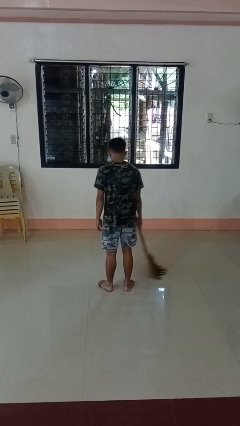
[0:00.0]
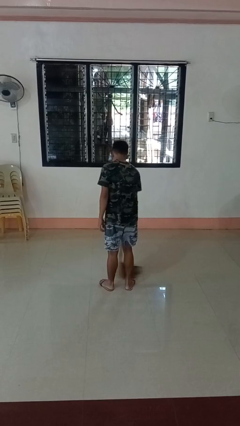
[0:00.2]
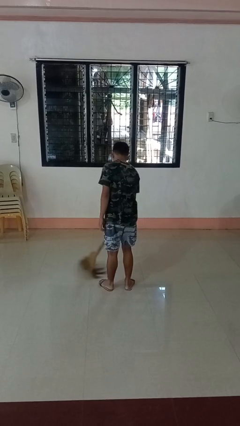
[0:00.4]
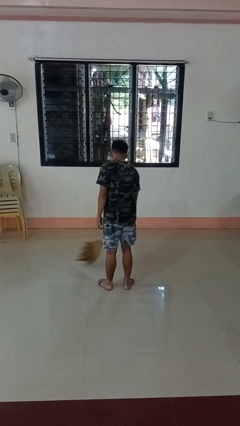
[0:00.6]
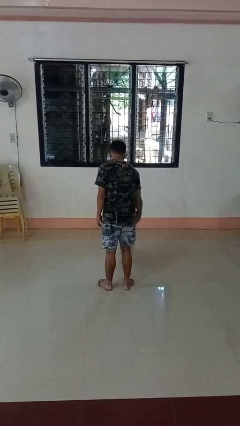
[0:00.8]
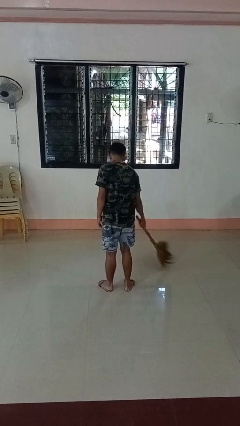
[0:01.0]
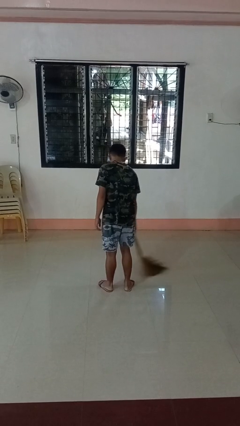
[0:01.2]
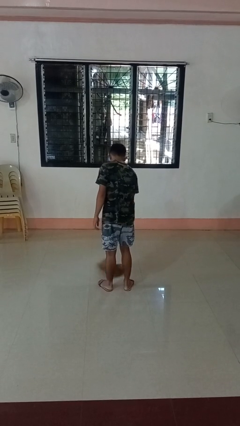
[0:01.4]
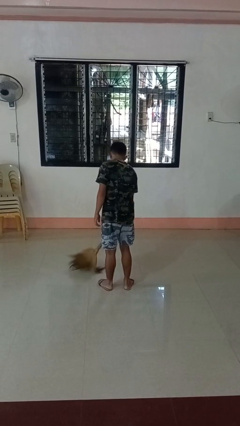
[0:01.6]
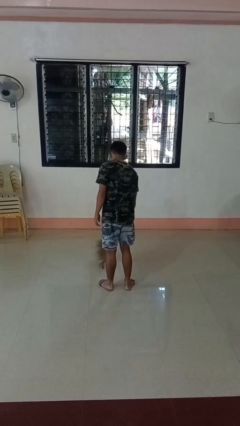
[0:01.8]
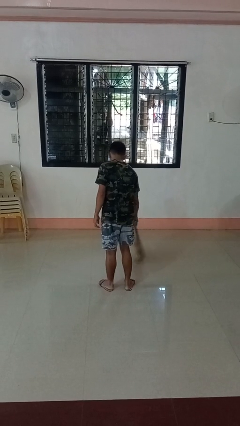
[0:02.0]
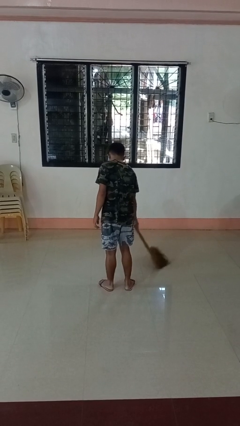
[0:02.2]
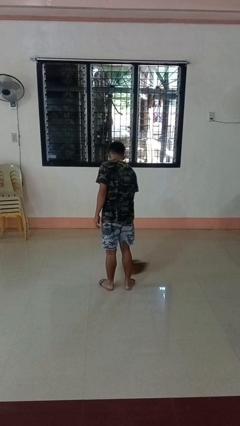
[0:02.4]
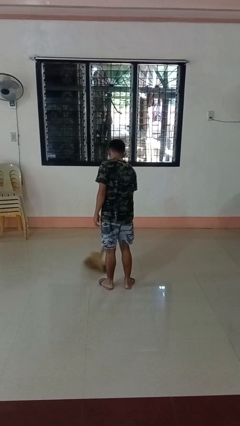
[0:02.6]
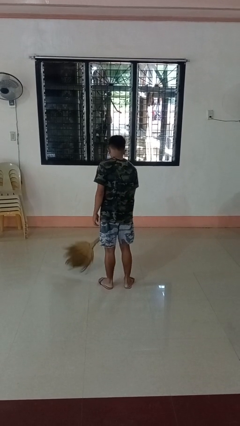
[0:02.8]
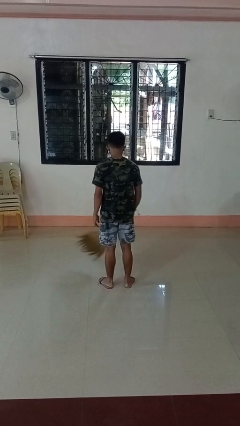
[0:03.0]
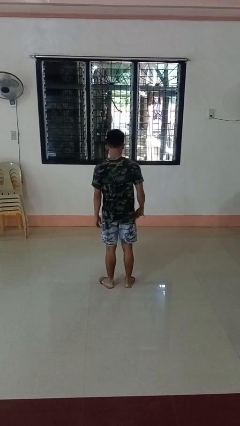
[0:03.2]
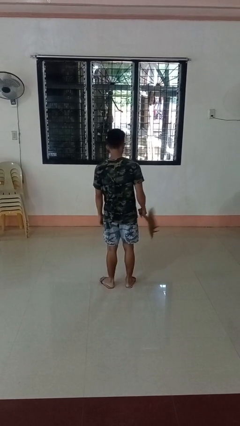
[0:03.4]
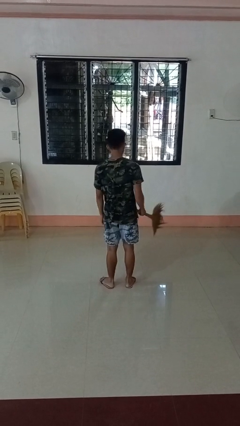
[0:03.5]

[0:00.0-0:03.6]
person sweeps floor

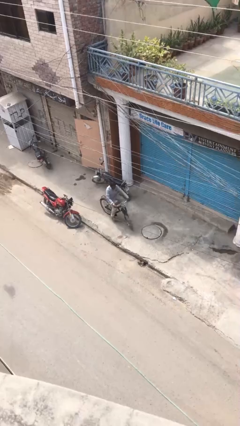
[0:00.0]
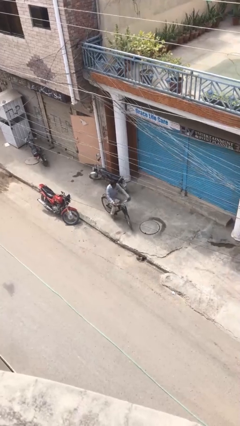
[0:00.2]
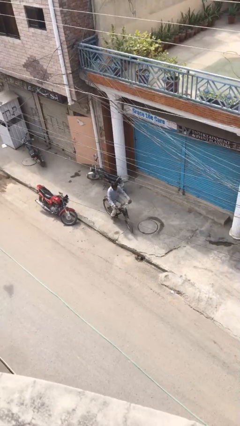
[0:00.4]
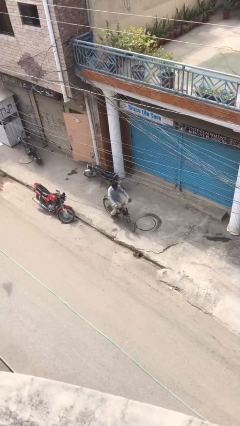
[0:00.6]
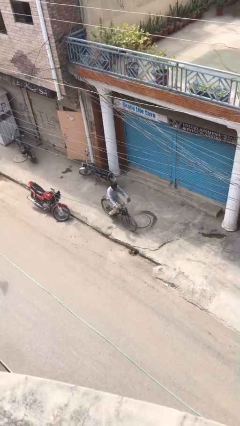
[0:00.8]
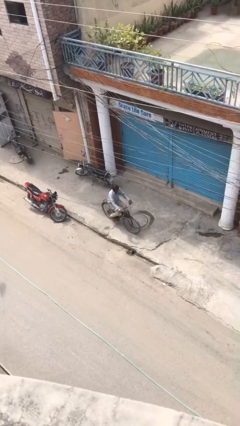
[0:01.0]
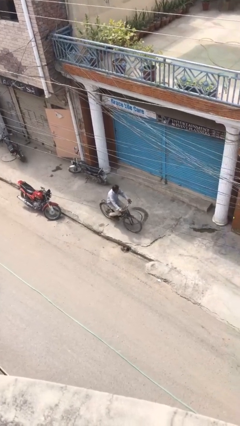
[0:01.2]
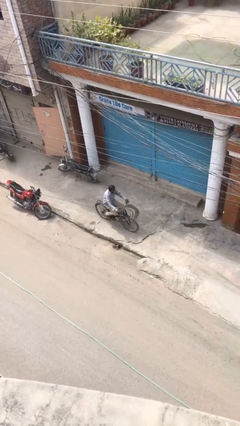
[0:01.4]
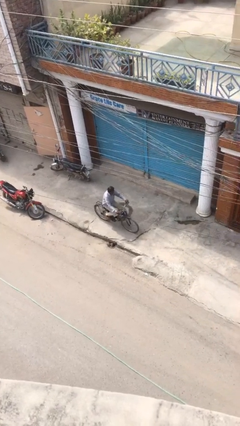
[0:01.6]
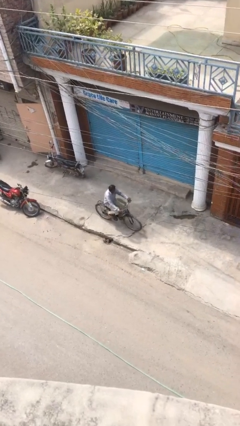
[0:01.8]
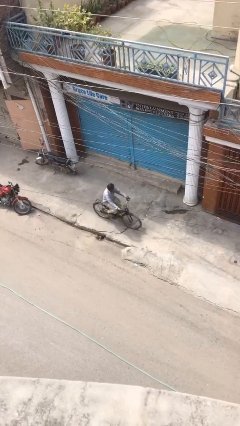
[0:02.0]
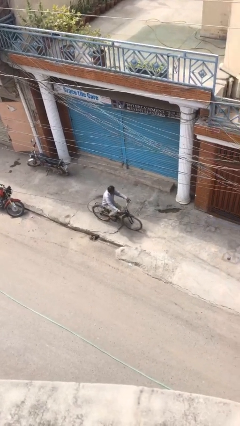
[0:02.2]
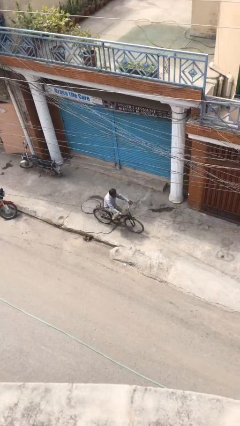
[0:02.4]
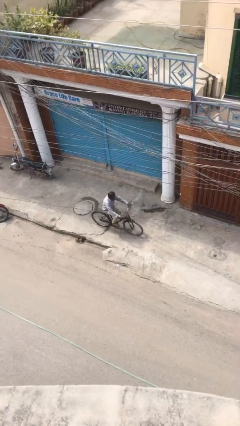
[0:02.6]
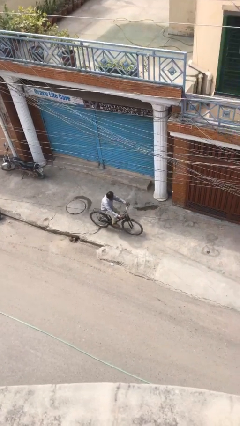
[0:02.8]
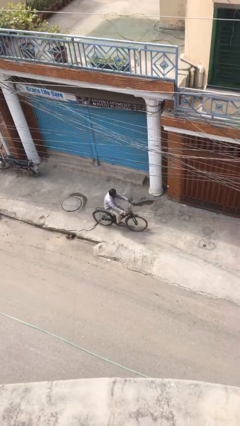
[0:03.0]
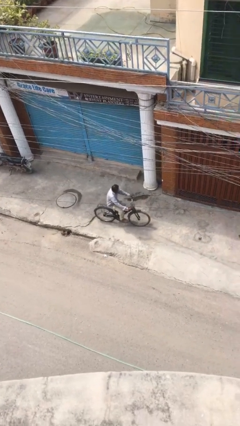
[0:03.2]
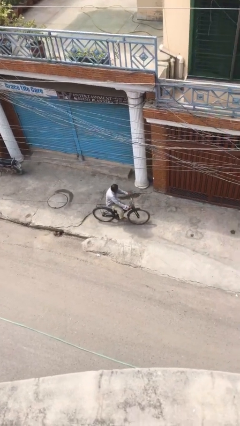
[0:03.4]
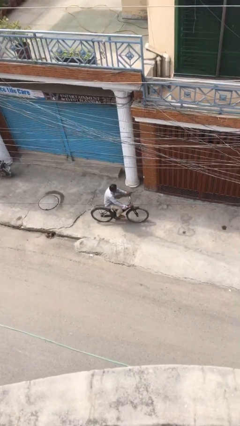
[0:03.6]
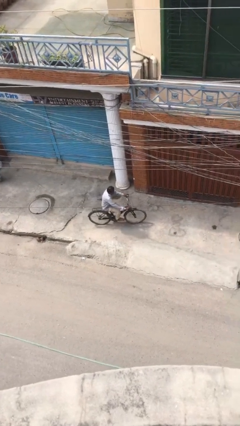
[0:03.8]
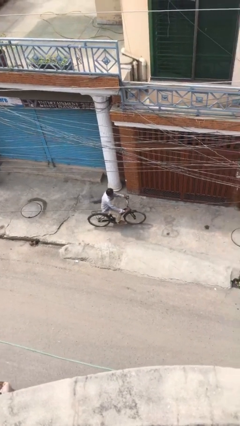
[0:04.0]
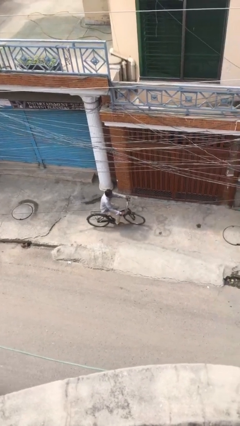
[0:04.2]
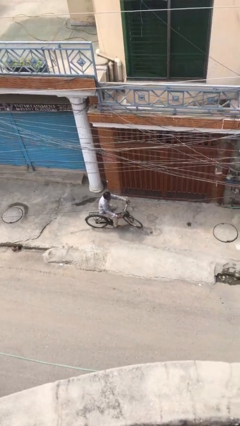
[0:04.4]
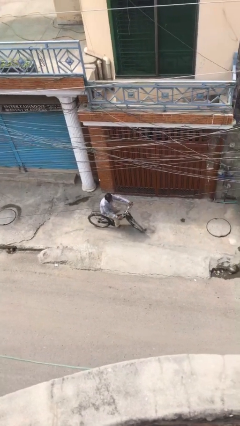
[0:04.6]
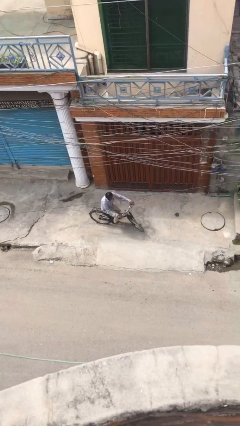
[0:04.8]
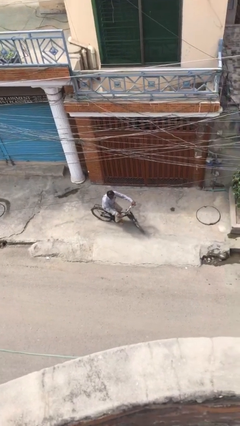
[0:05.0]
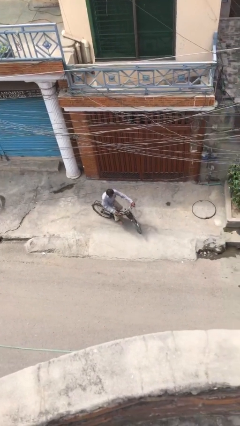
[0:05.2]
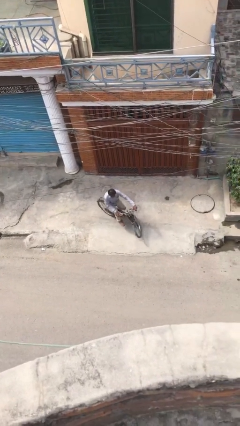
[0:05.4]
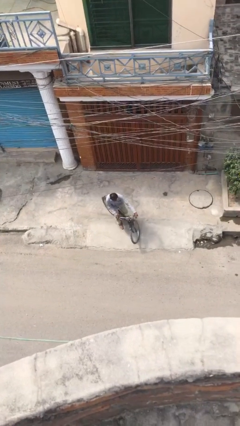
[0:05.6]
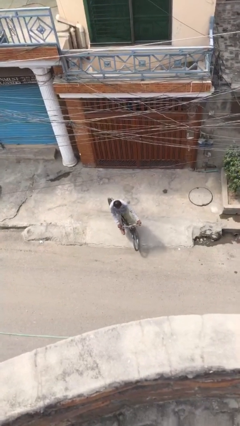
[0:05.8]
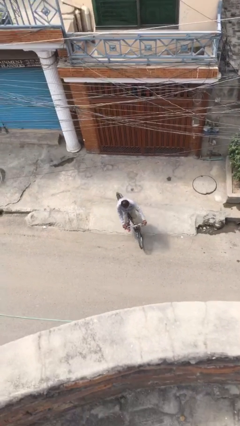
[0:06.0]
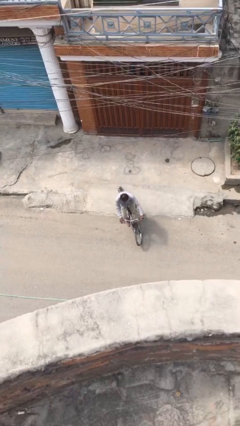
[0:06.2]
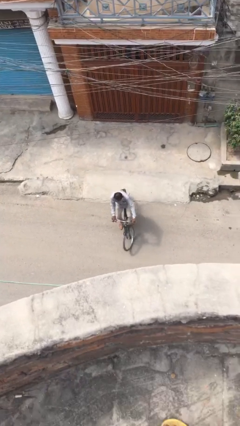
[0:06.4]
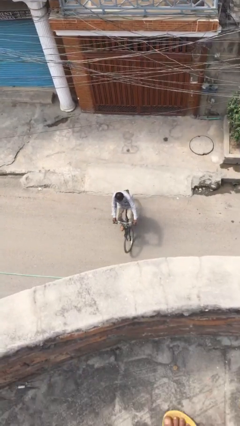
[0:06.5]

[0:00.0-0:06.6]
person rides bicycle

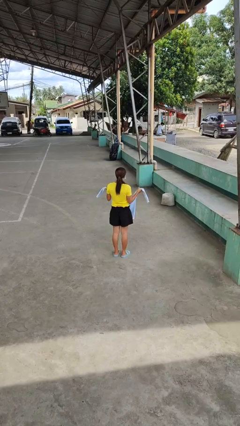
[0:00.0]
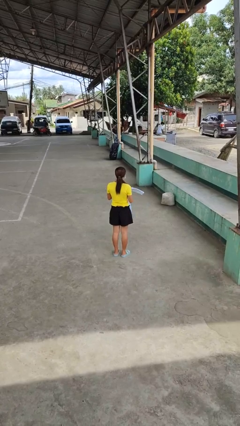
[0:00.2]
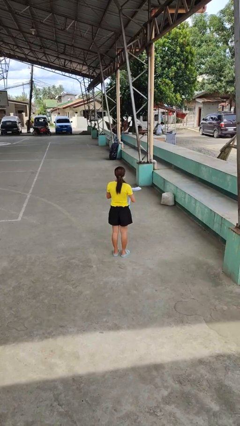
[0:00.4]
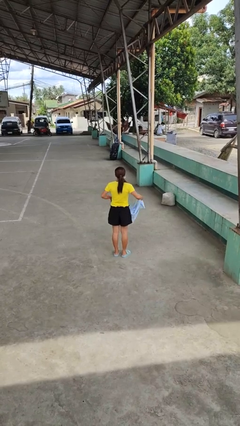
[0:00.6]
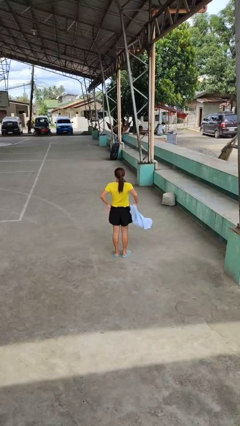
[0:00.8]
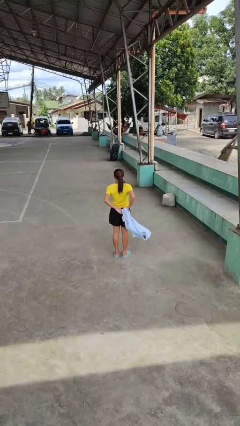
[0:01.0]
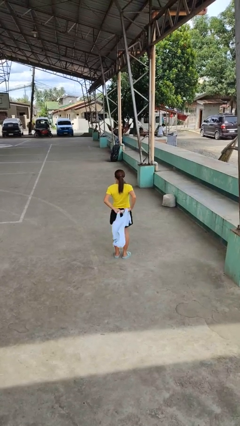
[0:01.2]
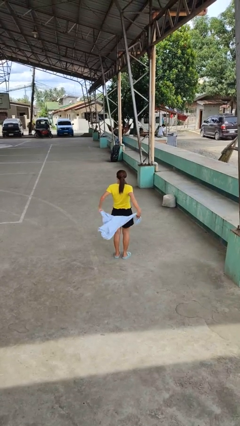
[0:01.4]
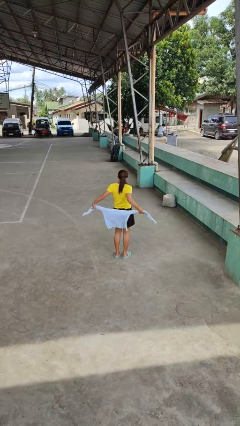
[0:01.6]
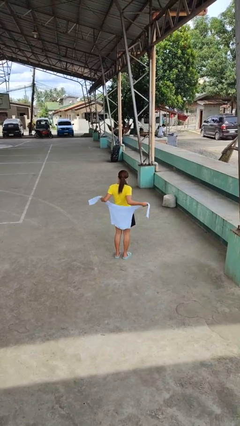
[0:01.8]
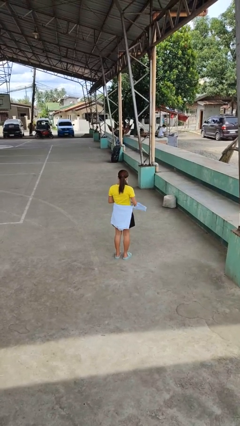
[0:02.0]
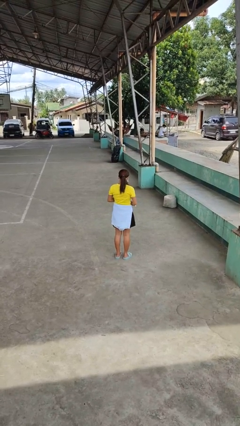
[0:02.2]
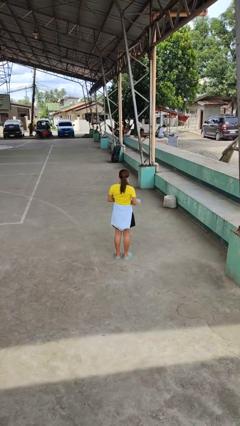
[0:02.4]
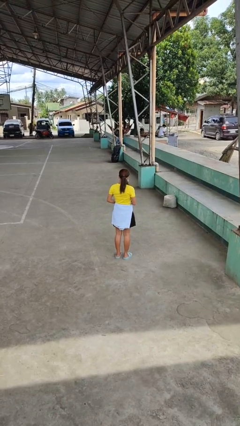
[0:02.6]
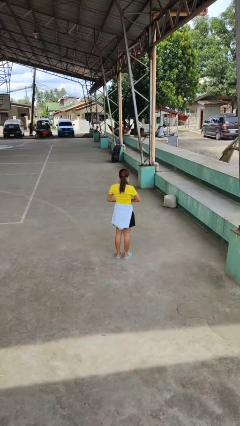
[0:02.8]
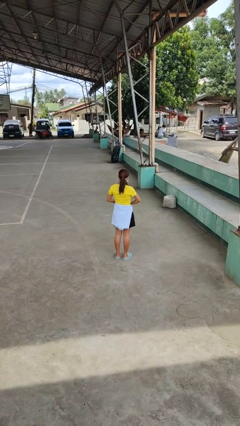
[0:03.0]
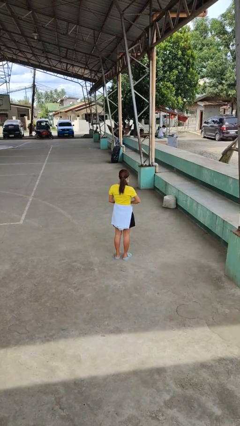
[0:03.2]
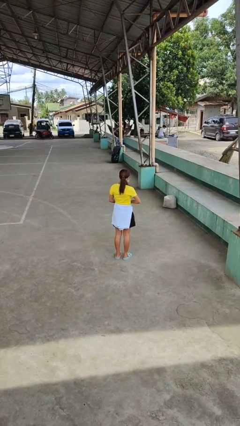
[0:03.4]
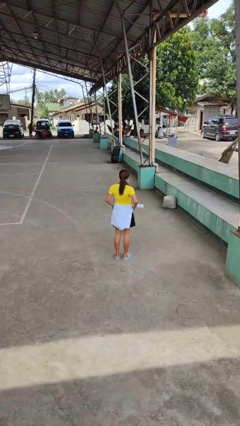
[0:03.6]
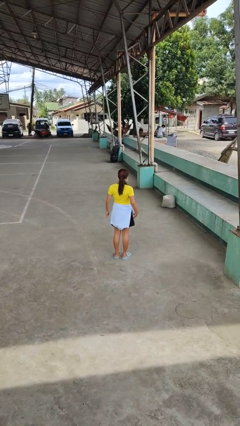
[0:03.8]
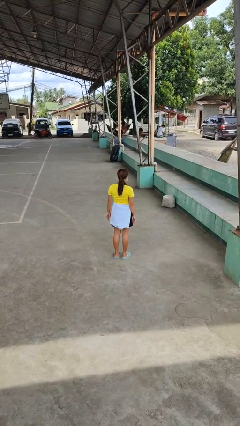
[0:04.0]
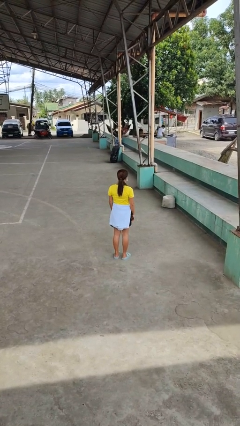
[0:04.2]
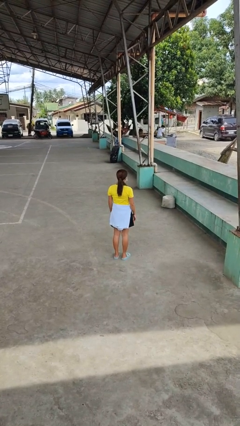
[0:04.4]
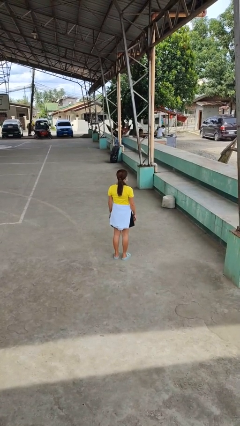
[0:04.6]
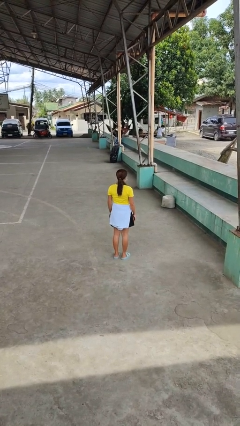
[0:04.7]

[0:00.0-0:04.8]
person ties jacket around waist

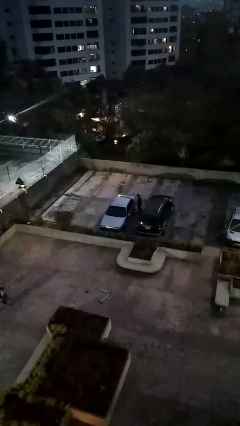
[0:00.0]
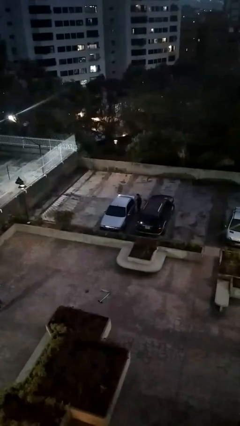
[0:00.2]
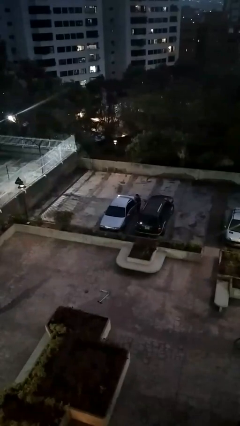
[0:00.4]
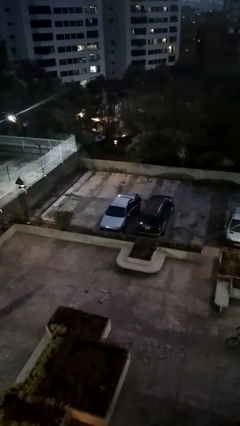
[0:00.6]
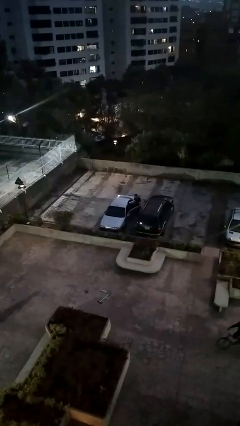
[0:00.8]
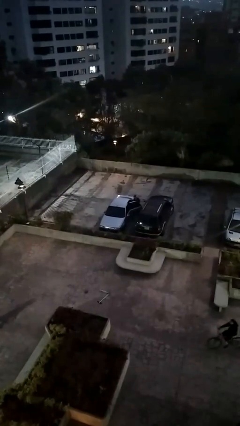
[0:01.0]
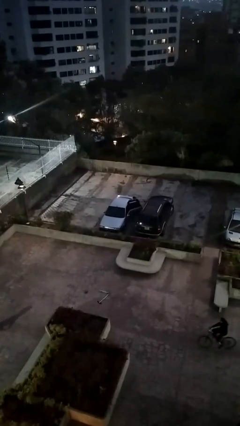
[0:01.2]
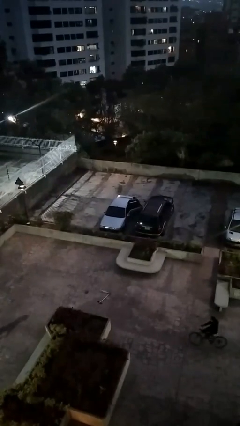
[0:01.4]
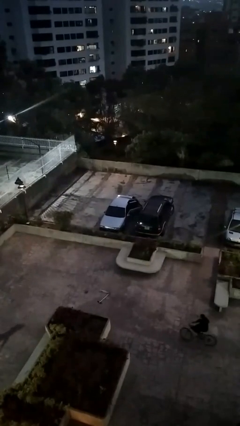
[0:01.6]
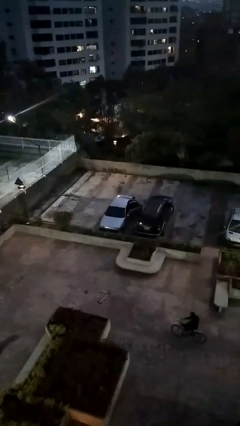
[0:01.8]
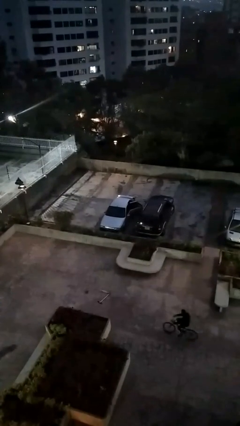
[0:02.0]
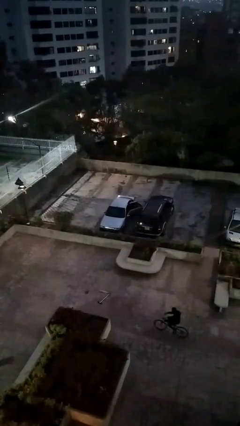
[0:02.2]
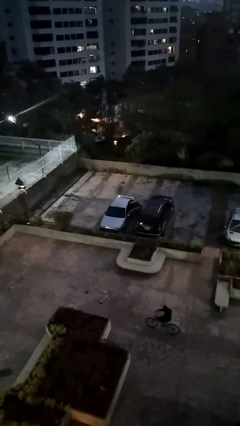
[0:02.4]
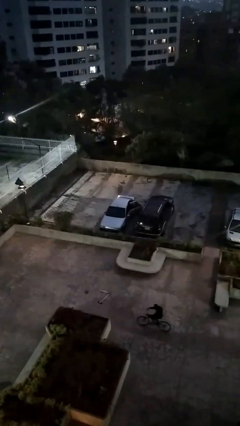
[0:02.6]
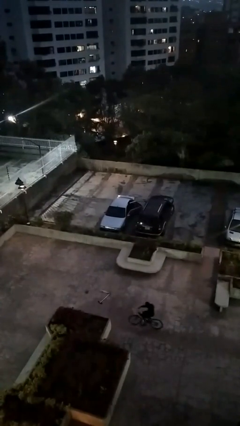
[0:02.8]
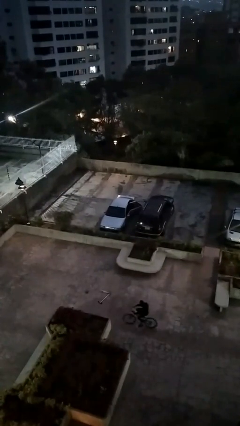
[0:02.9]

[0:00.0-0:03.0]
car picks up person
